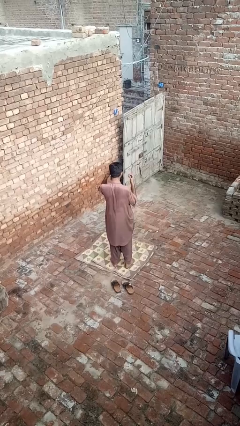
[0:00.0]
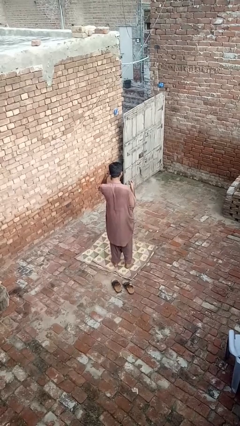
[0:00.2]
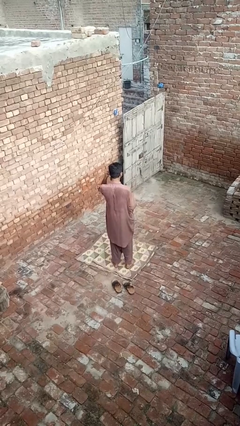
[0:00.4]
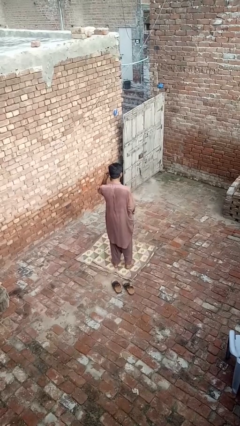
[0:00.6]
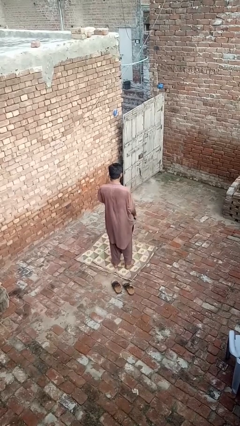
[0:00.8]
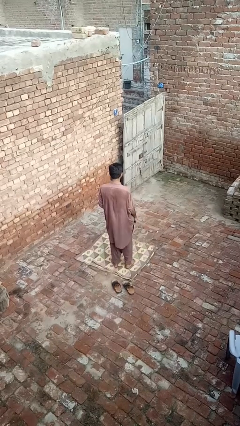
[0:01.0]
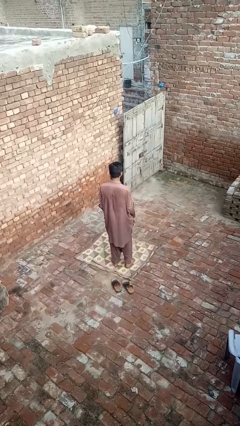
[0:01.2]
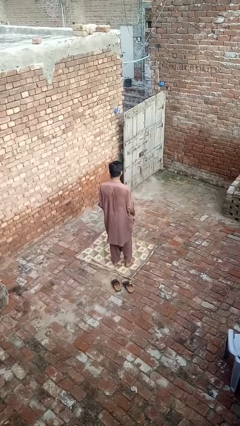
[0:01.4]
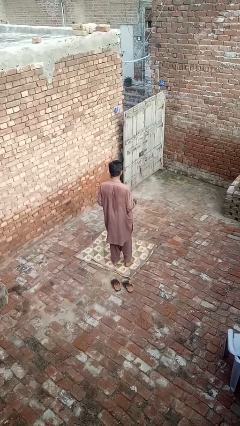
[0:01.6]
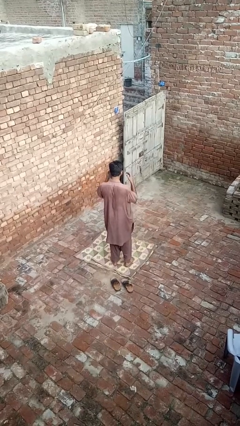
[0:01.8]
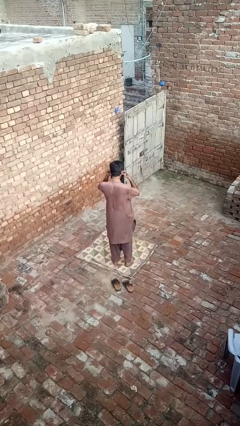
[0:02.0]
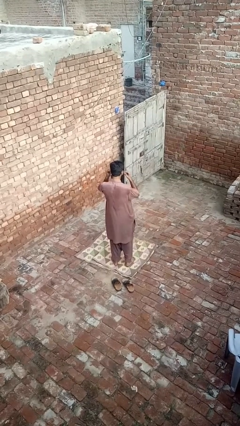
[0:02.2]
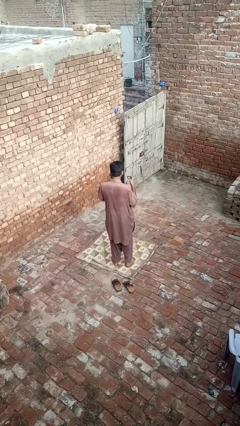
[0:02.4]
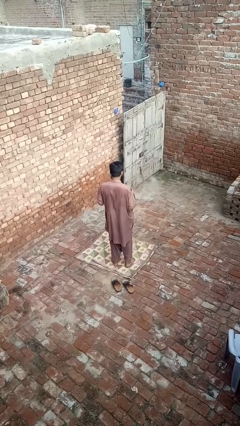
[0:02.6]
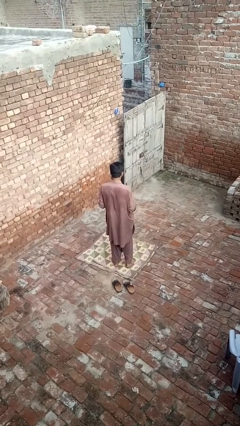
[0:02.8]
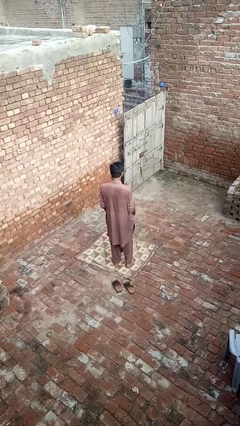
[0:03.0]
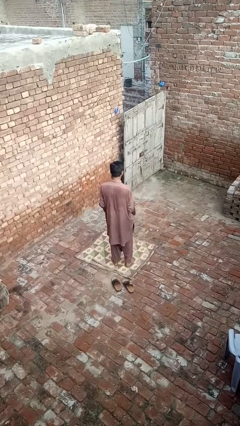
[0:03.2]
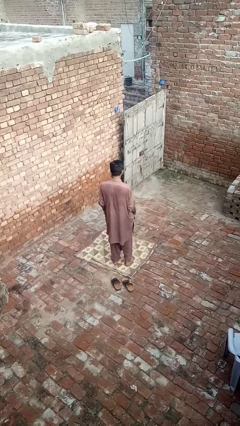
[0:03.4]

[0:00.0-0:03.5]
person takes off headphones

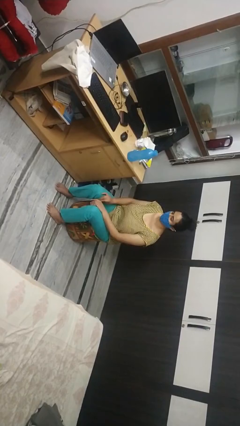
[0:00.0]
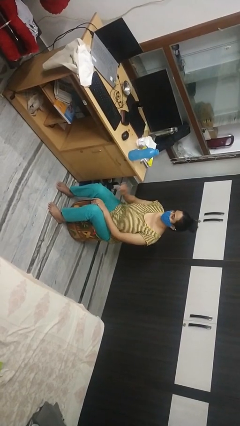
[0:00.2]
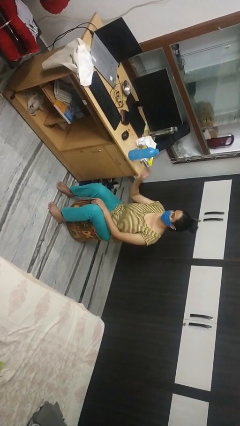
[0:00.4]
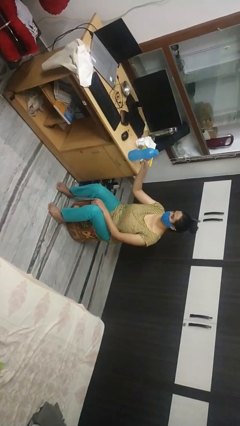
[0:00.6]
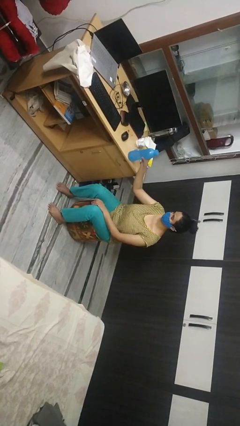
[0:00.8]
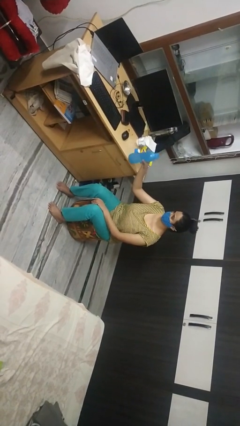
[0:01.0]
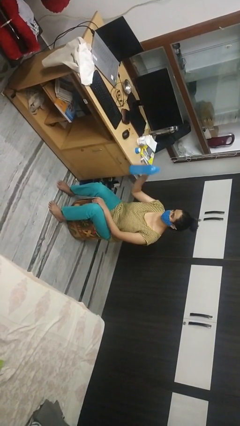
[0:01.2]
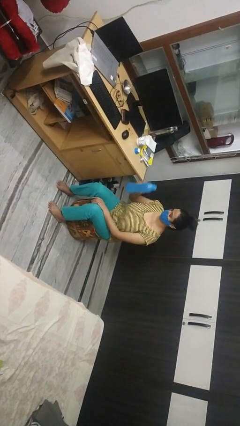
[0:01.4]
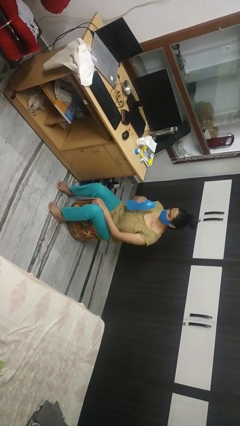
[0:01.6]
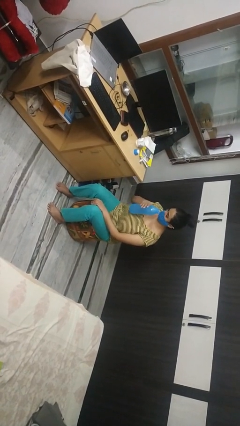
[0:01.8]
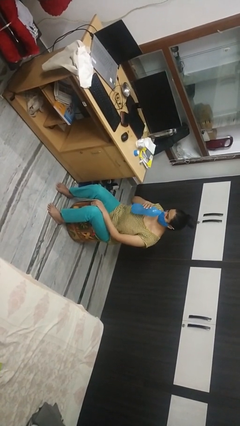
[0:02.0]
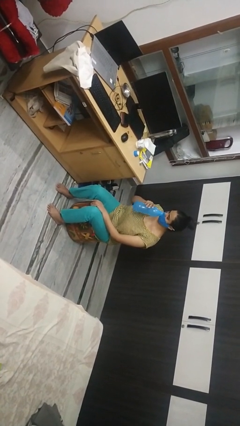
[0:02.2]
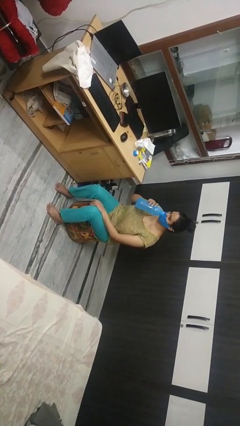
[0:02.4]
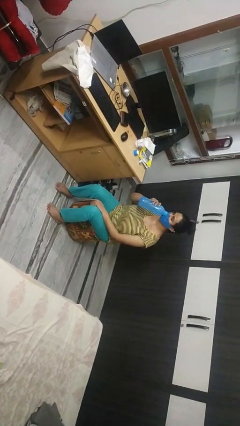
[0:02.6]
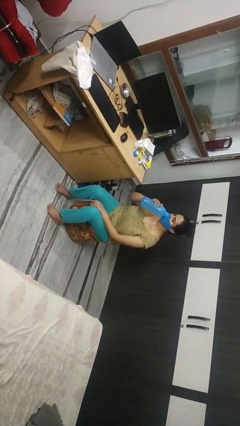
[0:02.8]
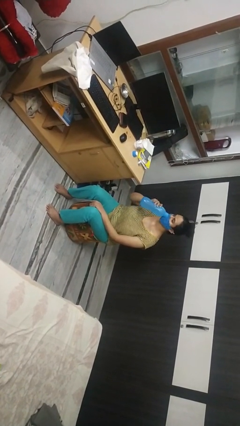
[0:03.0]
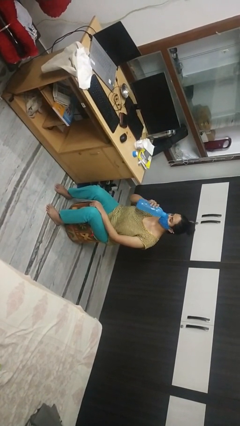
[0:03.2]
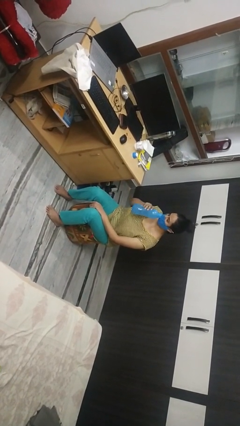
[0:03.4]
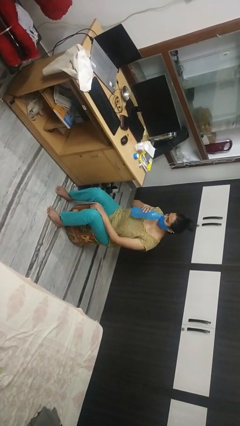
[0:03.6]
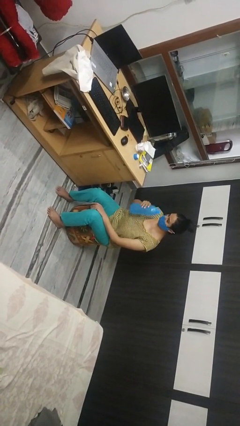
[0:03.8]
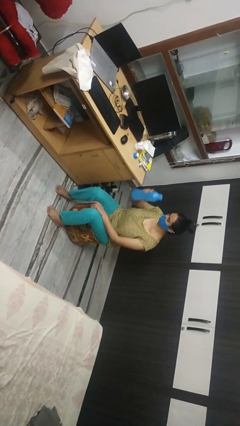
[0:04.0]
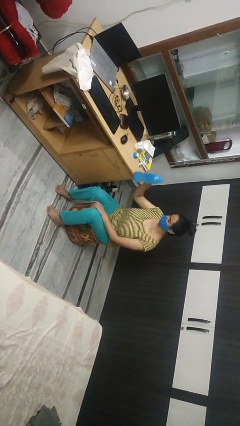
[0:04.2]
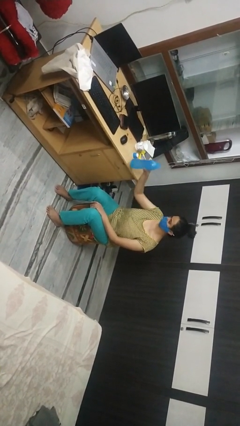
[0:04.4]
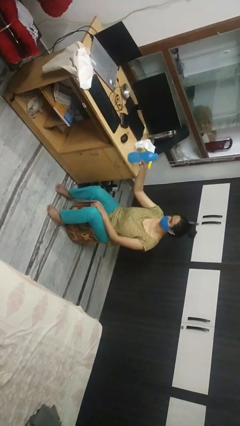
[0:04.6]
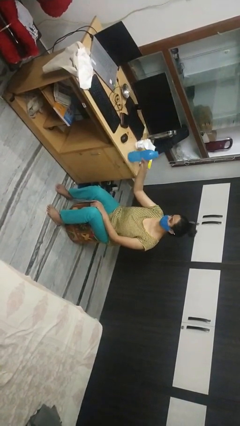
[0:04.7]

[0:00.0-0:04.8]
person drinks from bottle

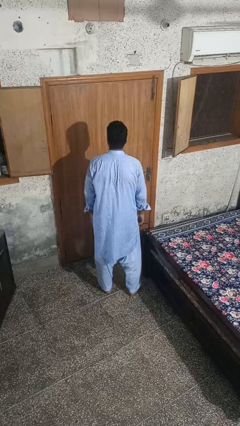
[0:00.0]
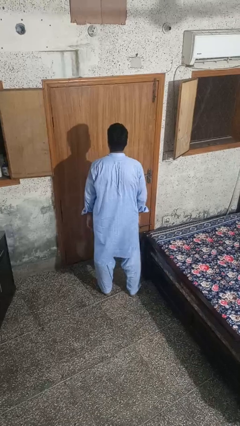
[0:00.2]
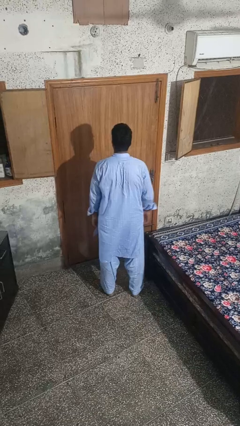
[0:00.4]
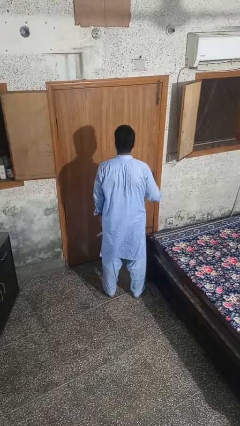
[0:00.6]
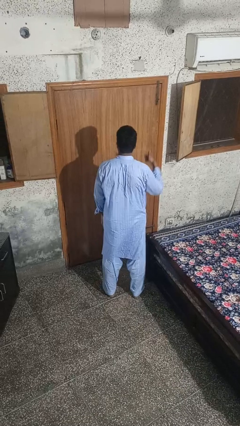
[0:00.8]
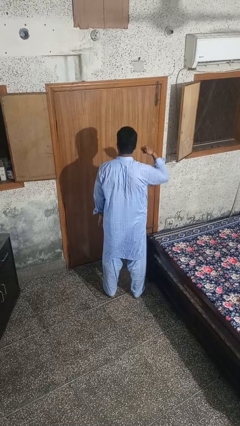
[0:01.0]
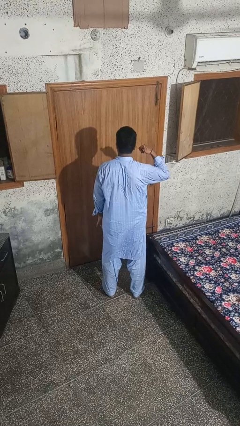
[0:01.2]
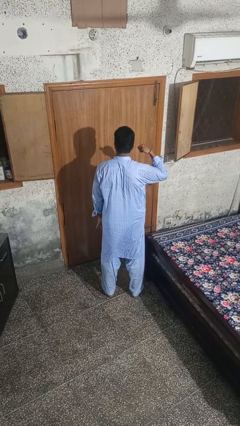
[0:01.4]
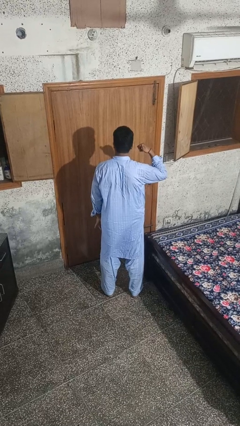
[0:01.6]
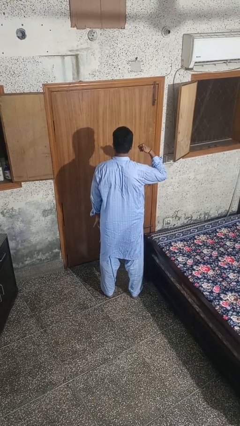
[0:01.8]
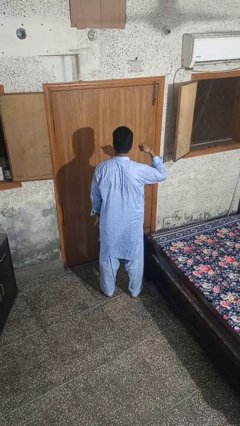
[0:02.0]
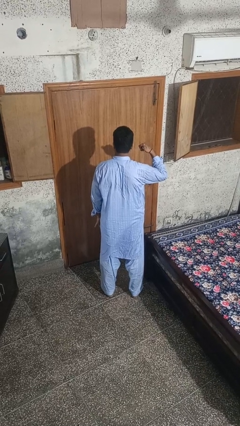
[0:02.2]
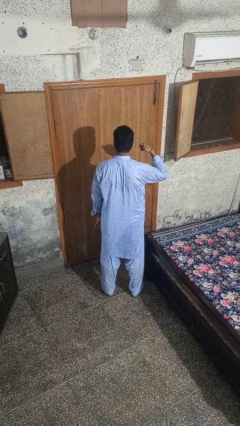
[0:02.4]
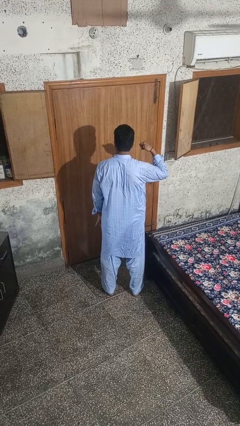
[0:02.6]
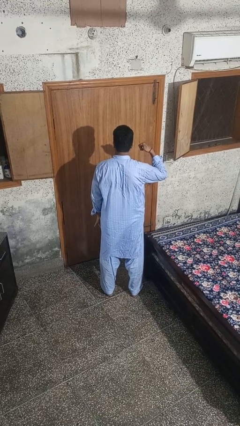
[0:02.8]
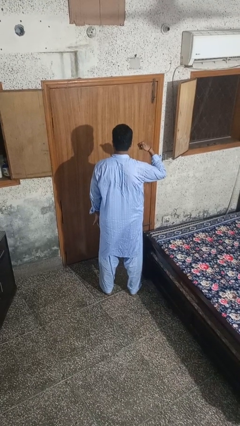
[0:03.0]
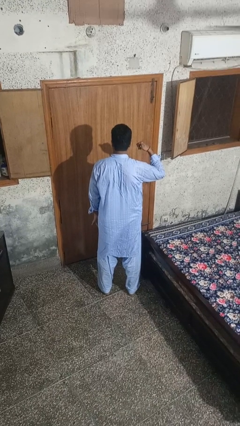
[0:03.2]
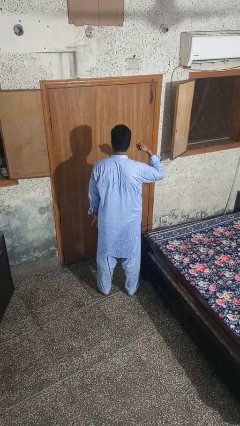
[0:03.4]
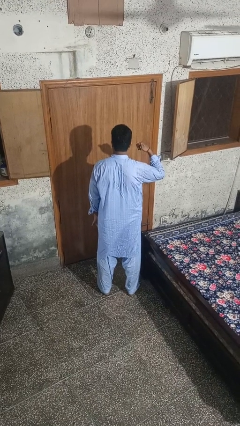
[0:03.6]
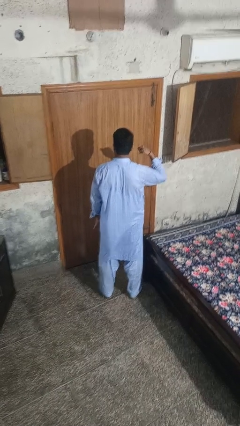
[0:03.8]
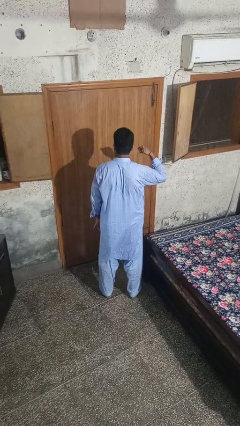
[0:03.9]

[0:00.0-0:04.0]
person gestures call me

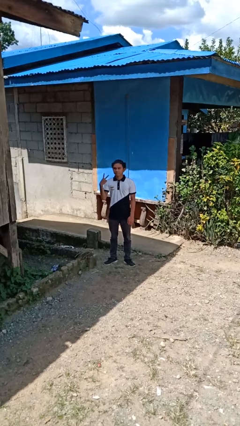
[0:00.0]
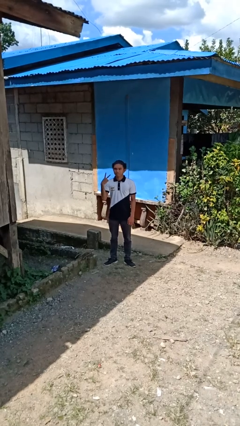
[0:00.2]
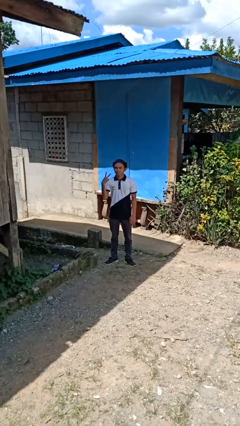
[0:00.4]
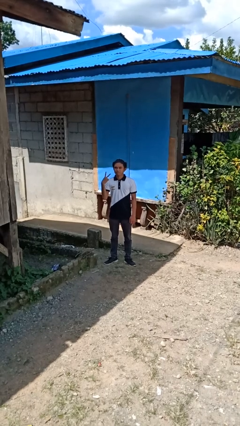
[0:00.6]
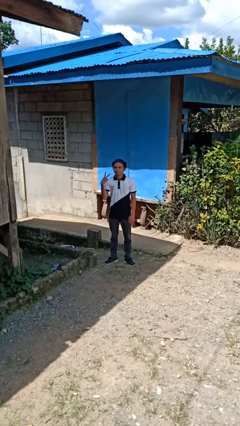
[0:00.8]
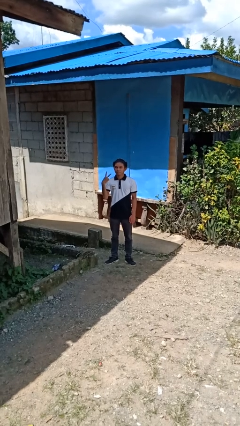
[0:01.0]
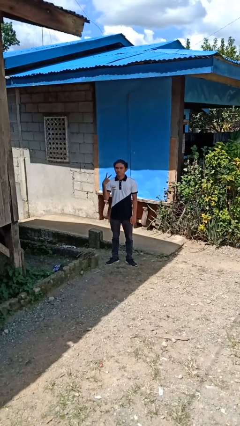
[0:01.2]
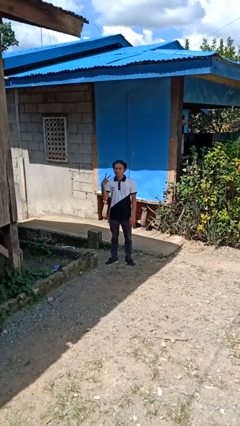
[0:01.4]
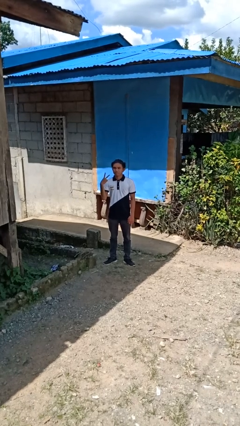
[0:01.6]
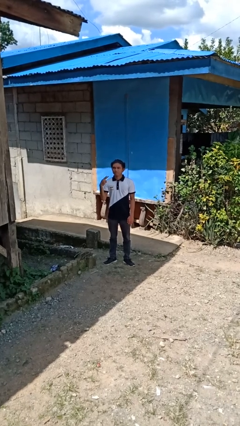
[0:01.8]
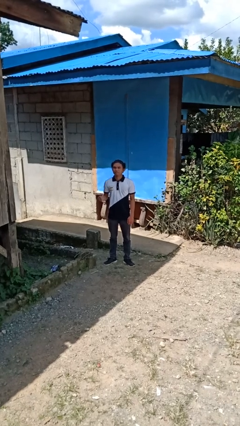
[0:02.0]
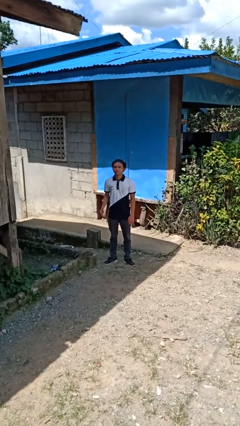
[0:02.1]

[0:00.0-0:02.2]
person gestures peace

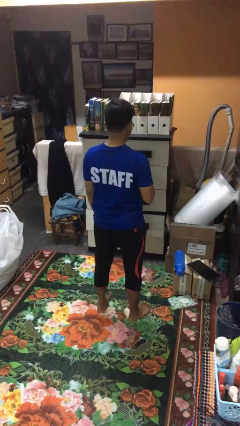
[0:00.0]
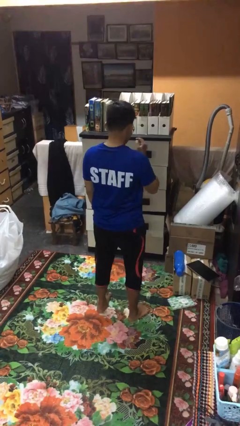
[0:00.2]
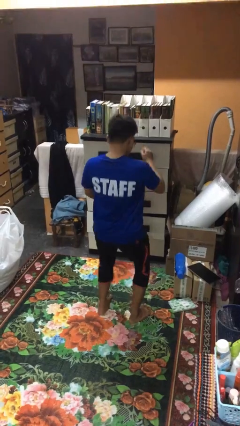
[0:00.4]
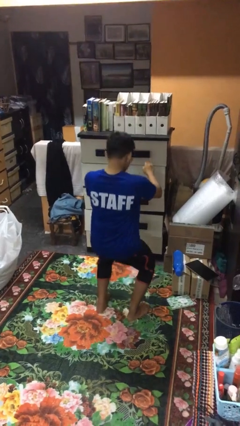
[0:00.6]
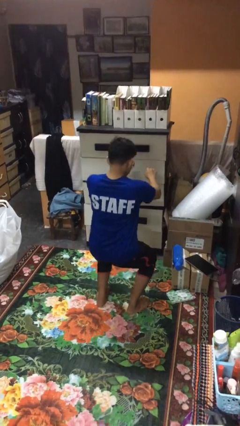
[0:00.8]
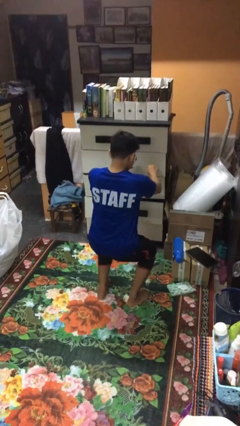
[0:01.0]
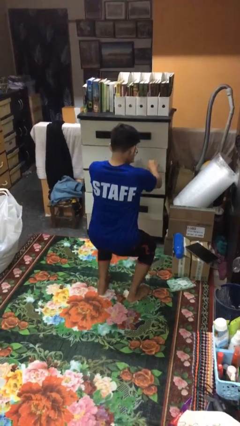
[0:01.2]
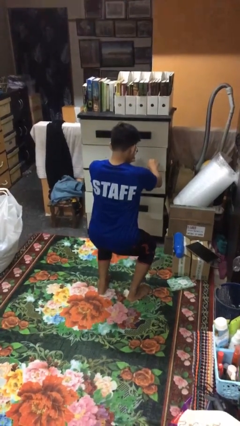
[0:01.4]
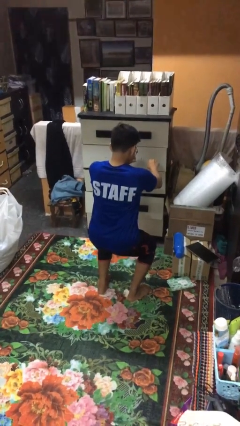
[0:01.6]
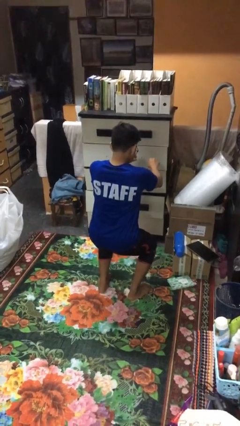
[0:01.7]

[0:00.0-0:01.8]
person squats

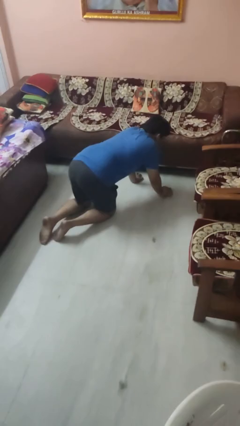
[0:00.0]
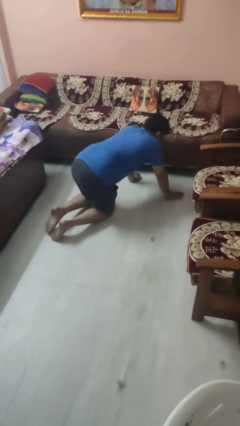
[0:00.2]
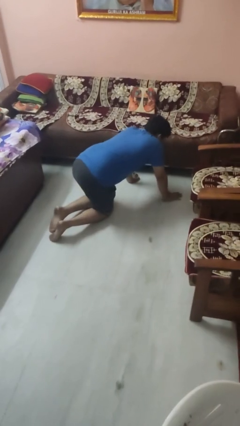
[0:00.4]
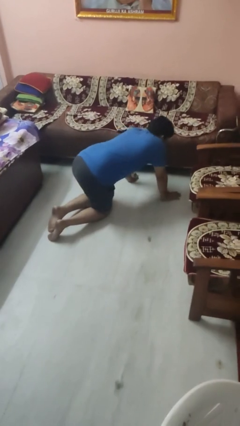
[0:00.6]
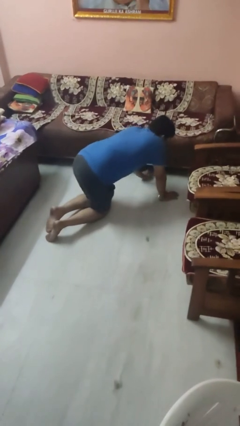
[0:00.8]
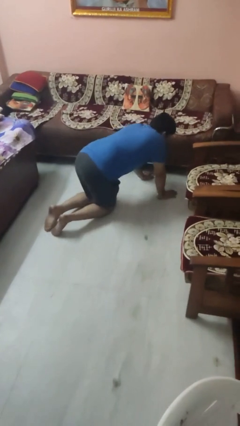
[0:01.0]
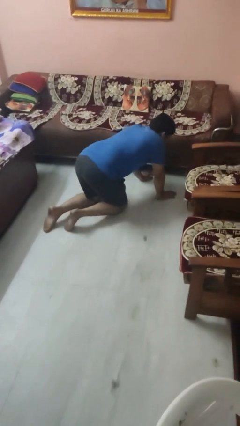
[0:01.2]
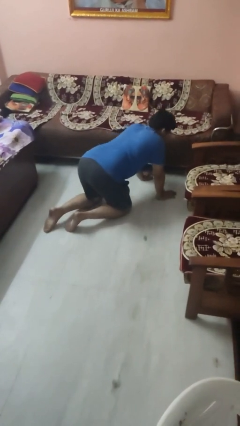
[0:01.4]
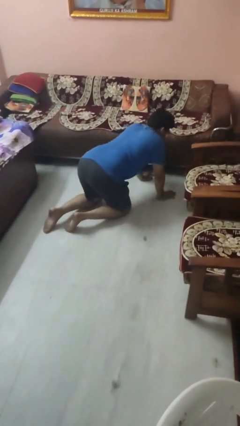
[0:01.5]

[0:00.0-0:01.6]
person crawls
